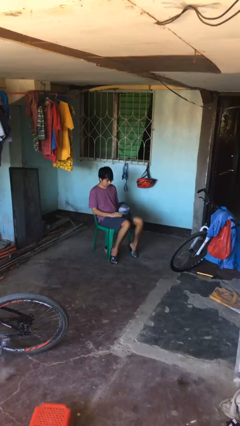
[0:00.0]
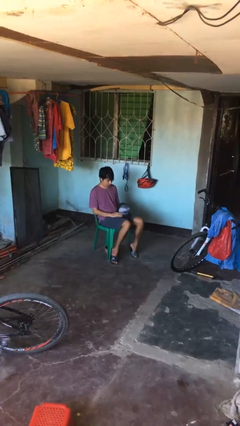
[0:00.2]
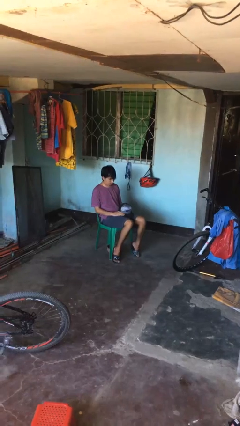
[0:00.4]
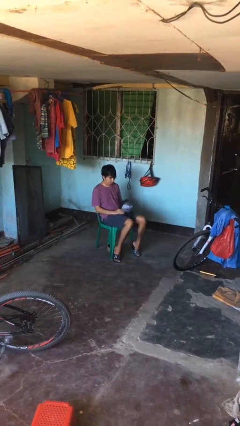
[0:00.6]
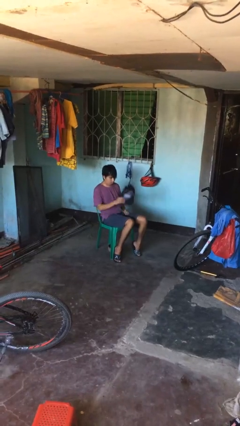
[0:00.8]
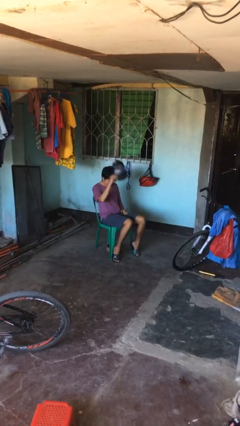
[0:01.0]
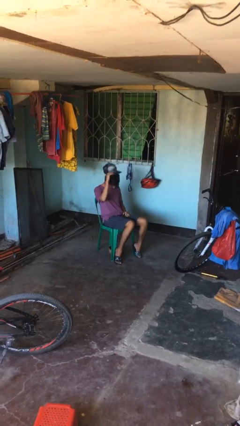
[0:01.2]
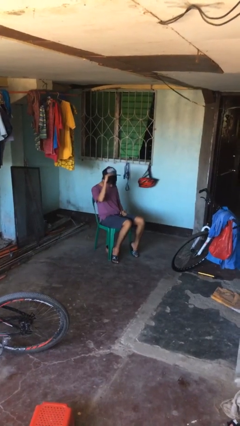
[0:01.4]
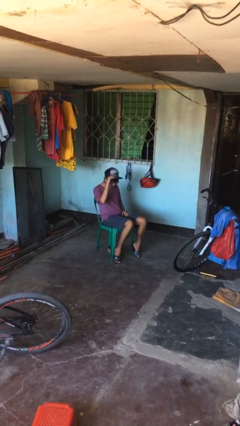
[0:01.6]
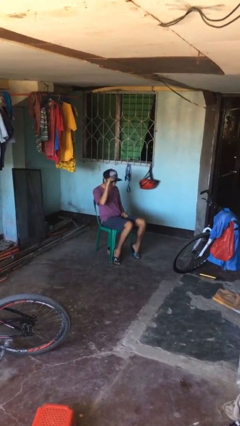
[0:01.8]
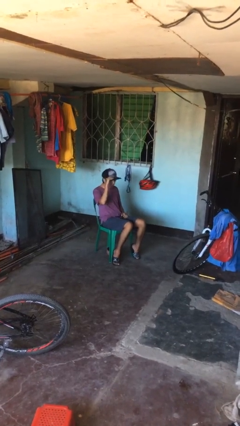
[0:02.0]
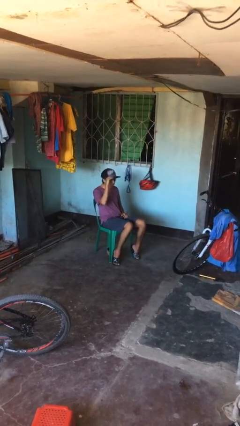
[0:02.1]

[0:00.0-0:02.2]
person puts on hat

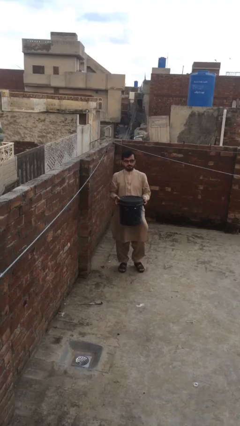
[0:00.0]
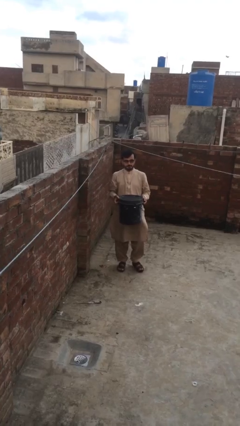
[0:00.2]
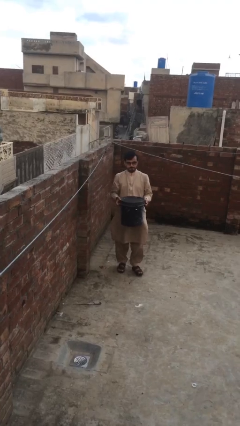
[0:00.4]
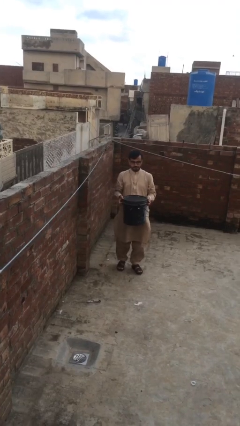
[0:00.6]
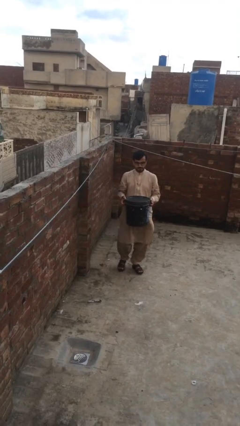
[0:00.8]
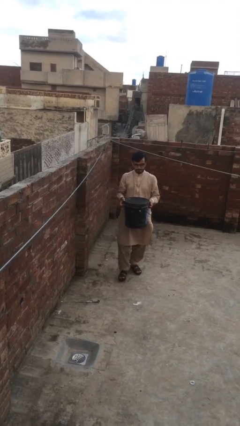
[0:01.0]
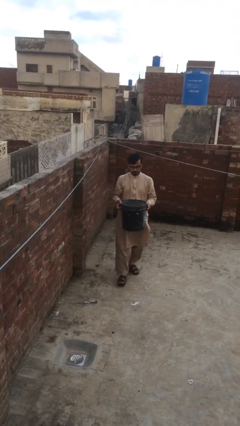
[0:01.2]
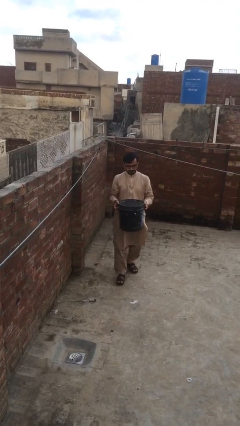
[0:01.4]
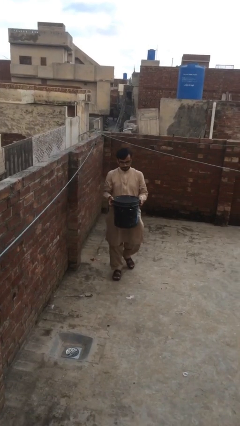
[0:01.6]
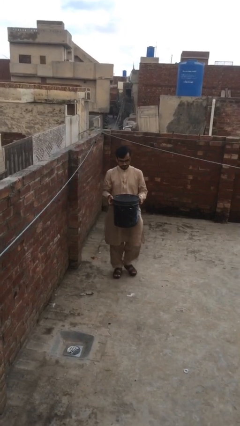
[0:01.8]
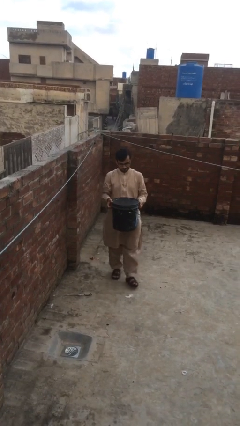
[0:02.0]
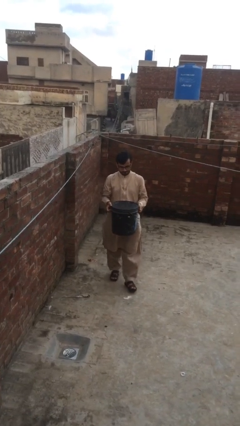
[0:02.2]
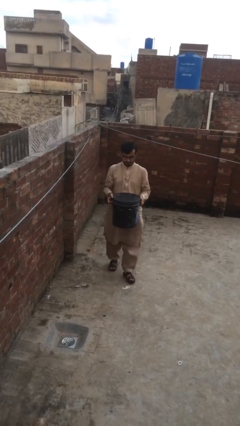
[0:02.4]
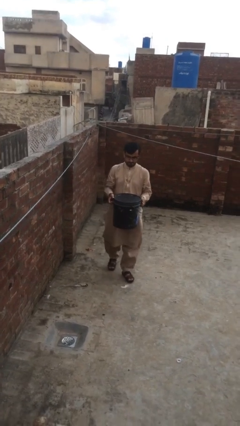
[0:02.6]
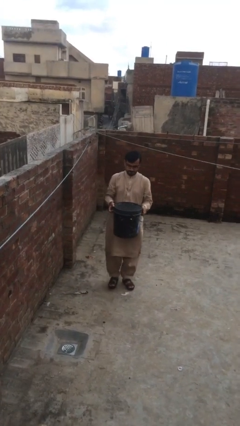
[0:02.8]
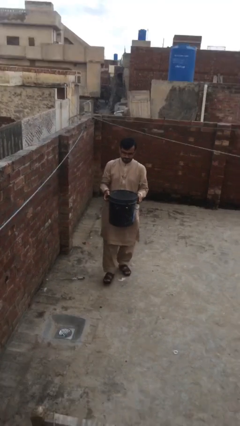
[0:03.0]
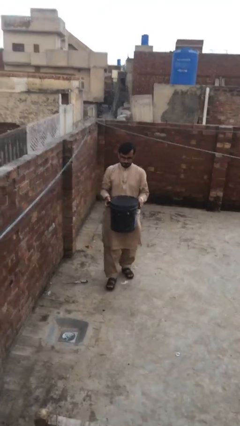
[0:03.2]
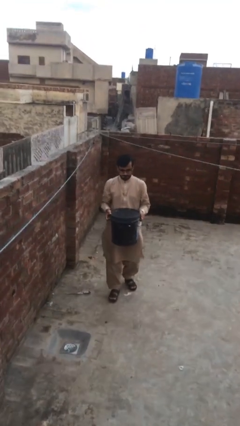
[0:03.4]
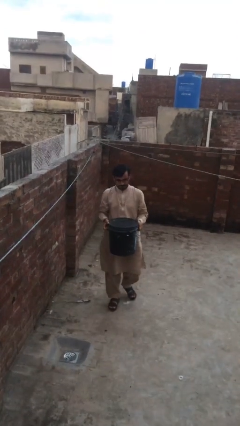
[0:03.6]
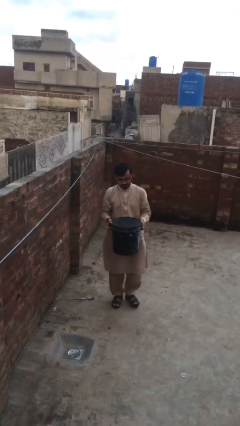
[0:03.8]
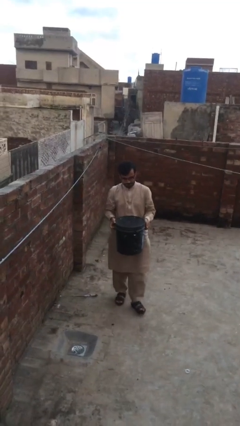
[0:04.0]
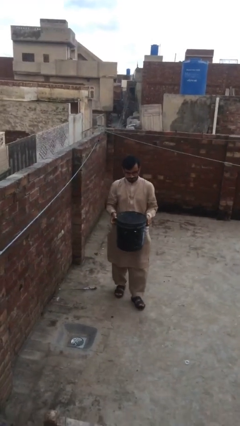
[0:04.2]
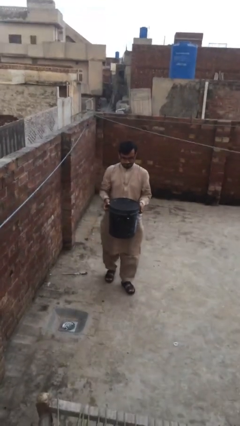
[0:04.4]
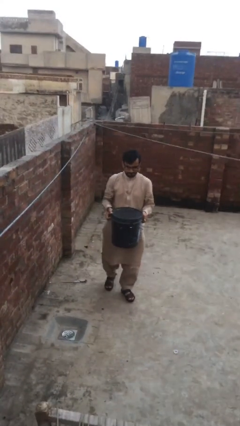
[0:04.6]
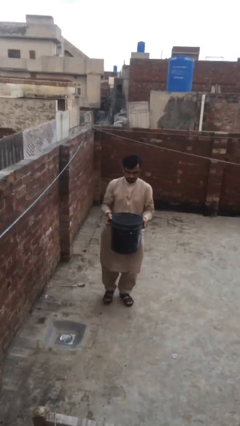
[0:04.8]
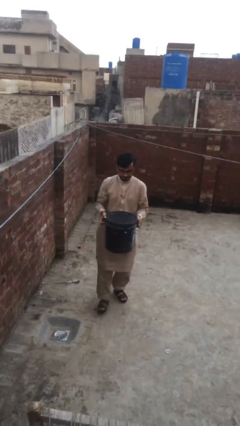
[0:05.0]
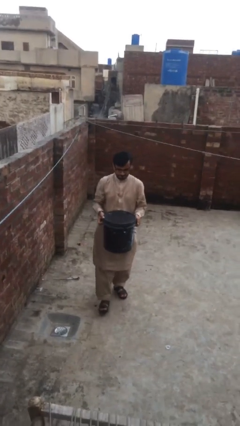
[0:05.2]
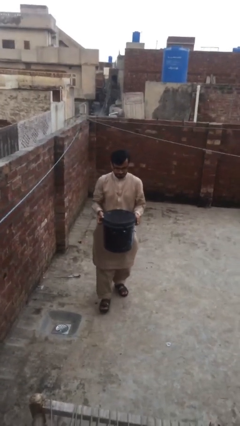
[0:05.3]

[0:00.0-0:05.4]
person carries heavy object

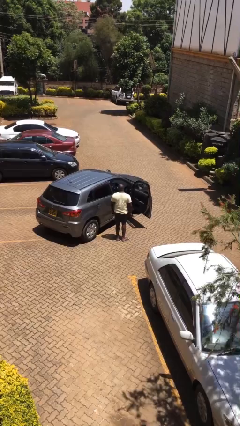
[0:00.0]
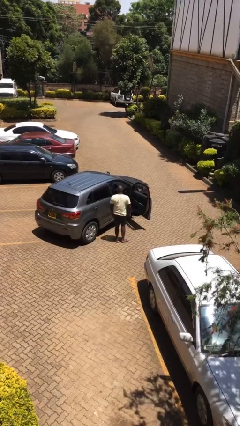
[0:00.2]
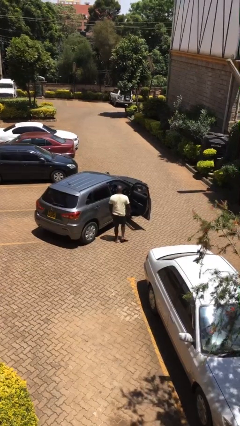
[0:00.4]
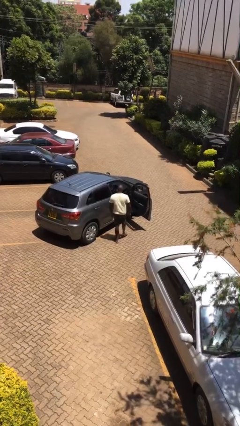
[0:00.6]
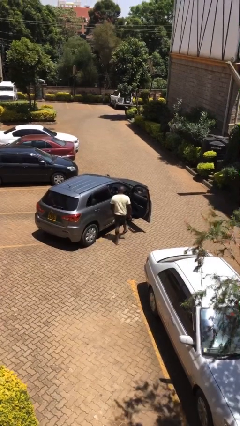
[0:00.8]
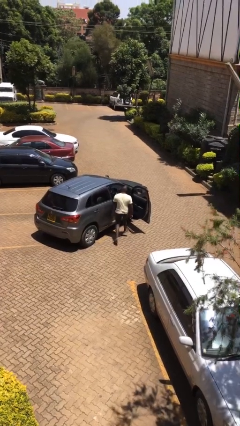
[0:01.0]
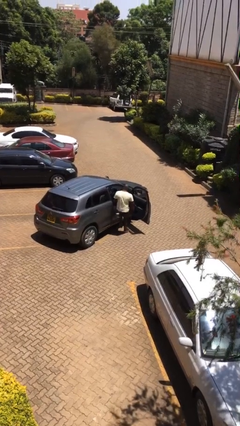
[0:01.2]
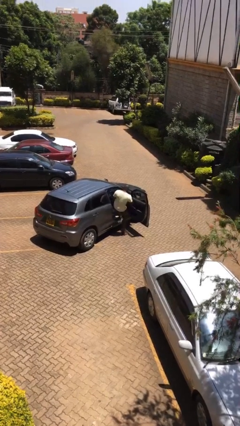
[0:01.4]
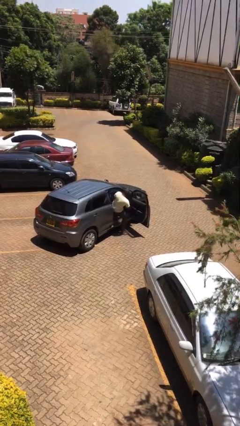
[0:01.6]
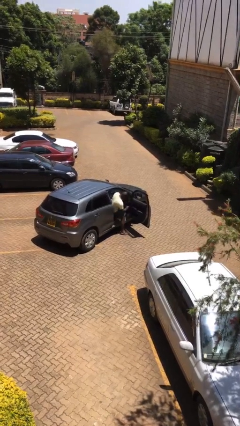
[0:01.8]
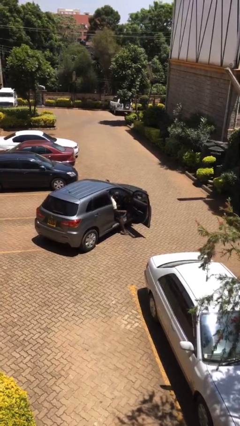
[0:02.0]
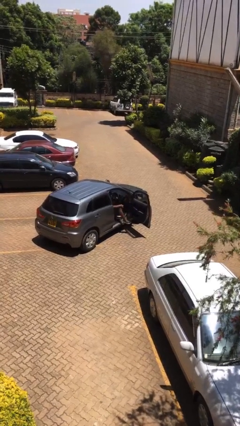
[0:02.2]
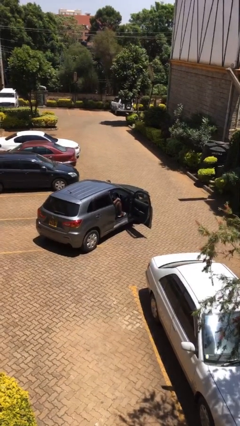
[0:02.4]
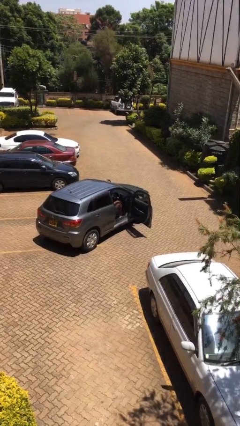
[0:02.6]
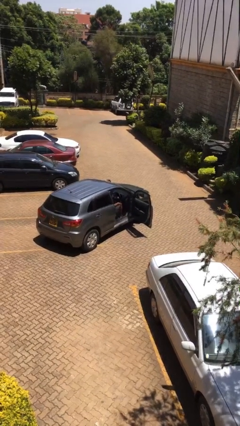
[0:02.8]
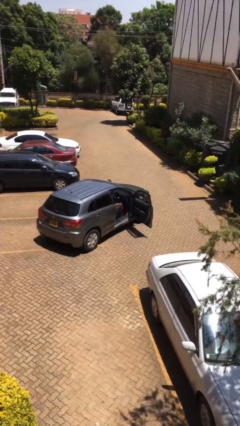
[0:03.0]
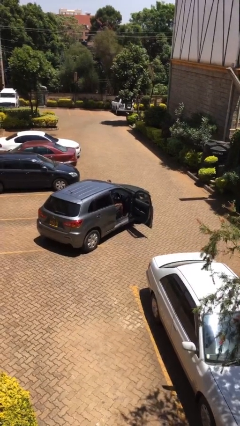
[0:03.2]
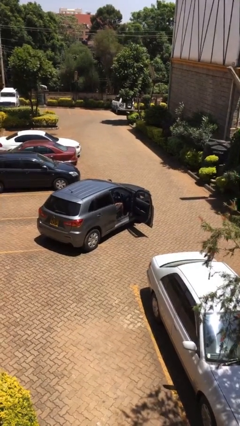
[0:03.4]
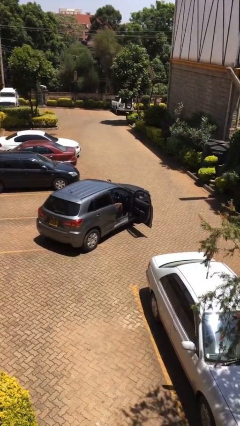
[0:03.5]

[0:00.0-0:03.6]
person enters car

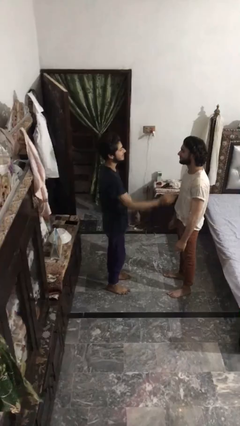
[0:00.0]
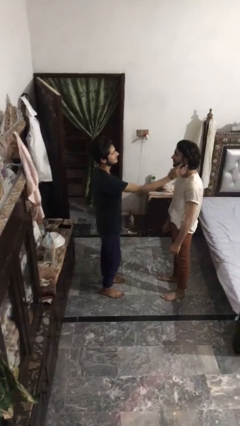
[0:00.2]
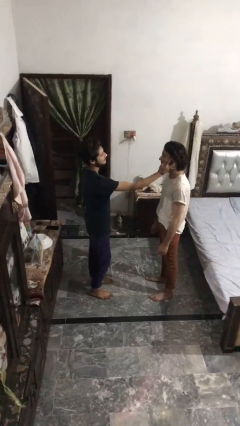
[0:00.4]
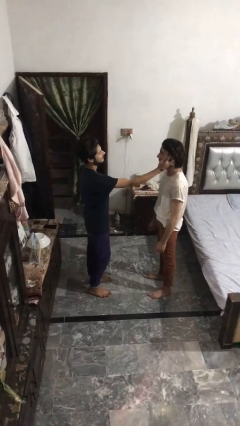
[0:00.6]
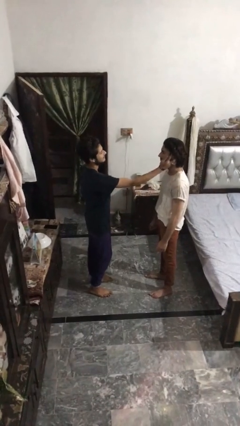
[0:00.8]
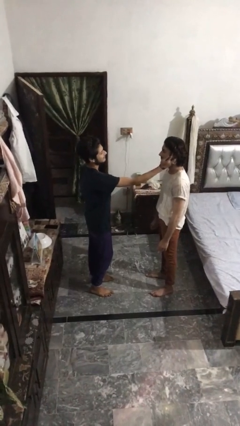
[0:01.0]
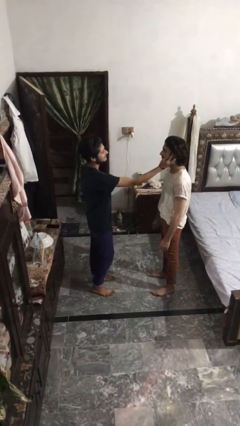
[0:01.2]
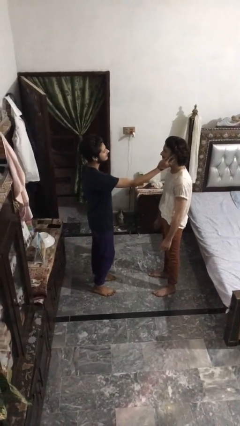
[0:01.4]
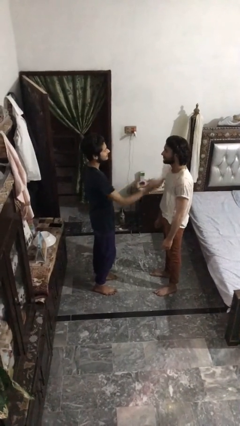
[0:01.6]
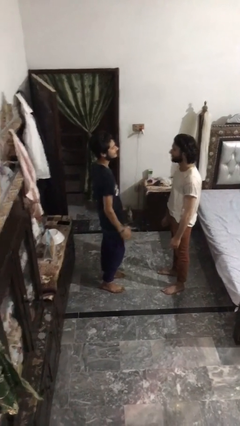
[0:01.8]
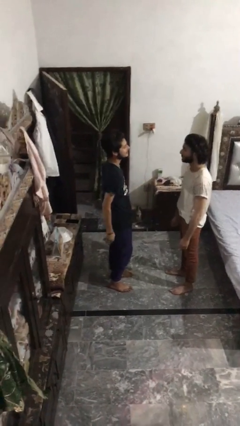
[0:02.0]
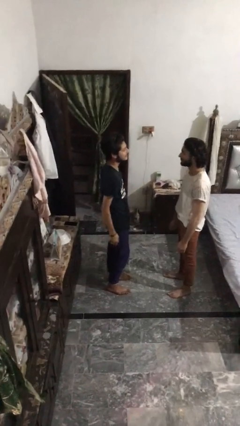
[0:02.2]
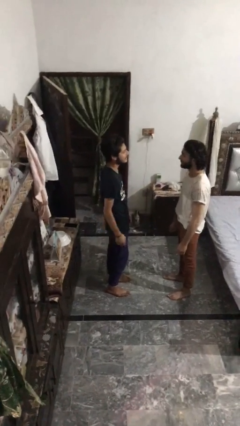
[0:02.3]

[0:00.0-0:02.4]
person touches face of person

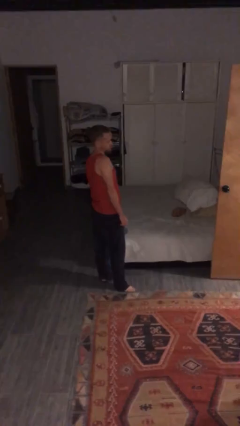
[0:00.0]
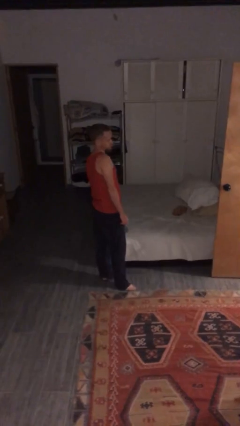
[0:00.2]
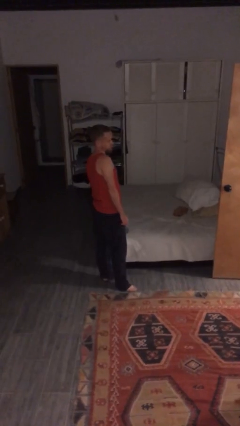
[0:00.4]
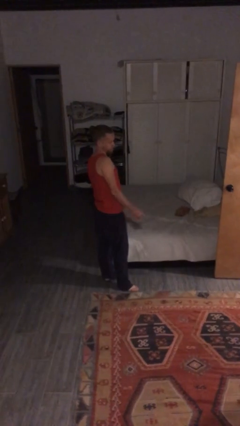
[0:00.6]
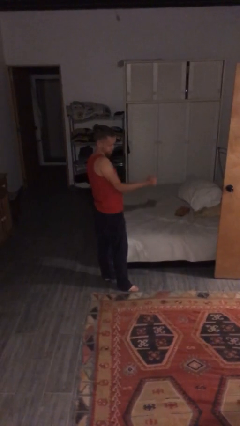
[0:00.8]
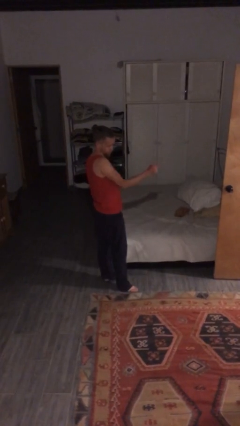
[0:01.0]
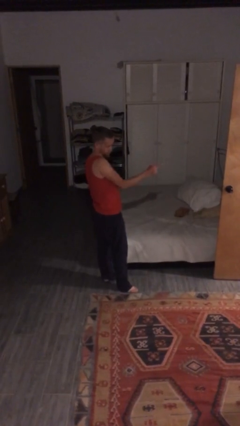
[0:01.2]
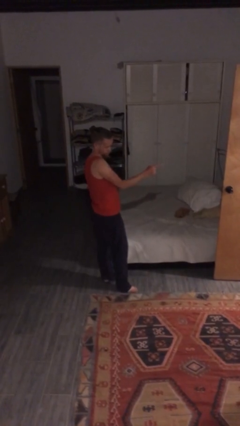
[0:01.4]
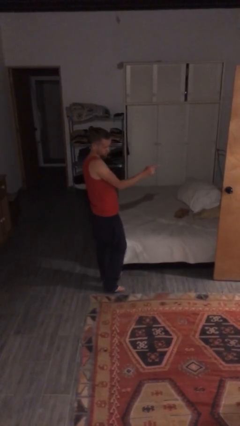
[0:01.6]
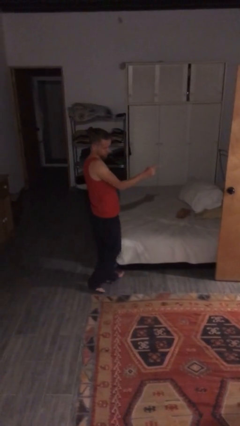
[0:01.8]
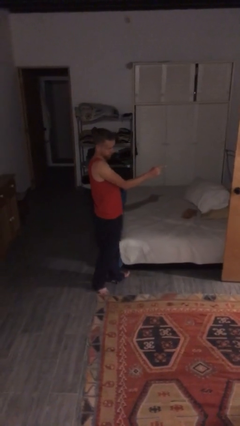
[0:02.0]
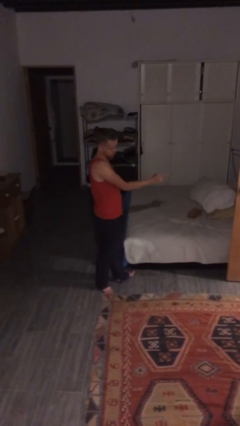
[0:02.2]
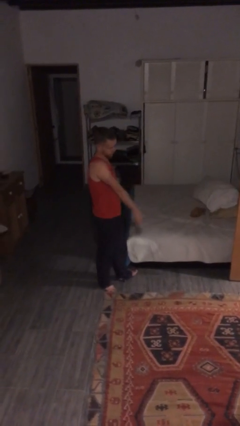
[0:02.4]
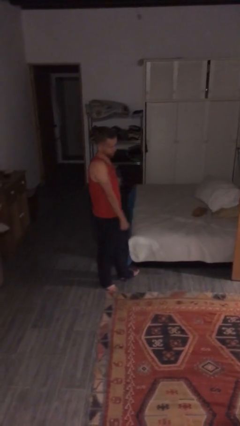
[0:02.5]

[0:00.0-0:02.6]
person points at person

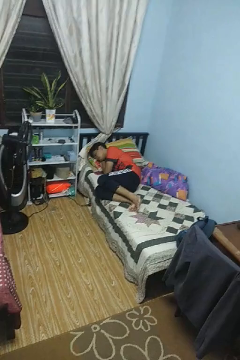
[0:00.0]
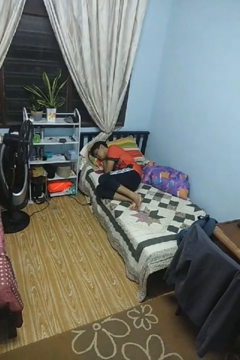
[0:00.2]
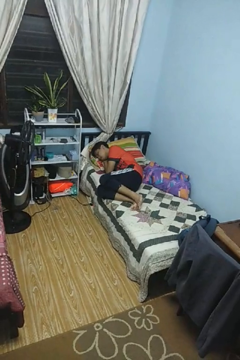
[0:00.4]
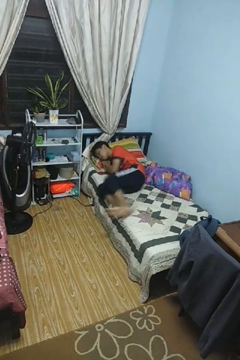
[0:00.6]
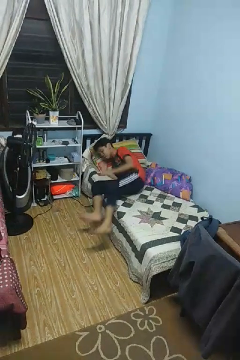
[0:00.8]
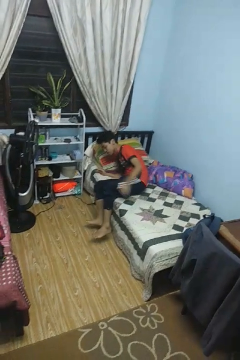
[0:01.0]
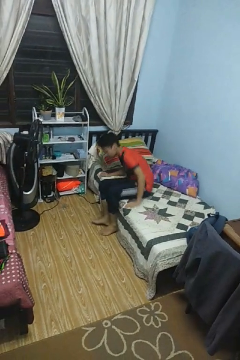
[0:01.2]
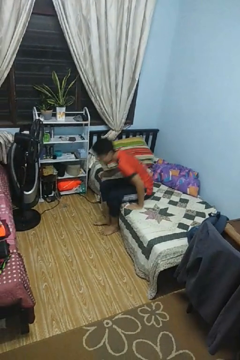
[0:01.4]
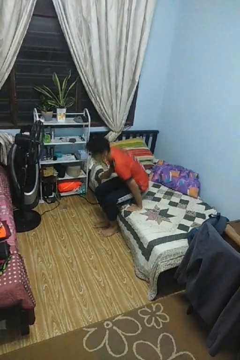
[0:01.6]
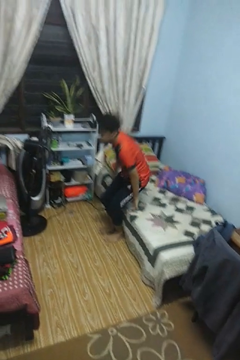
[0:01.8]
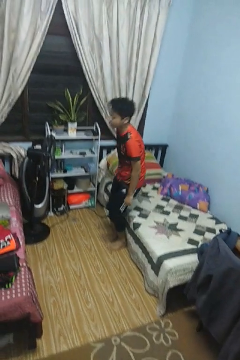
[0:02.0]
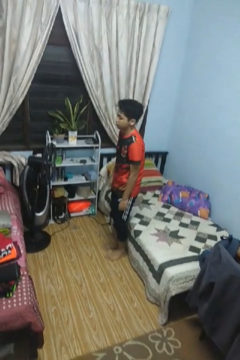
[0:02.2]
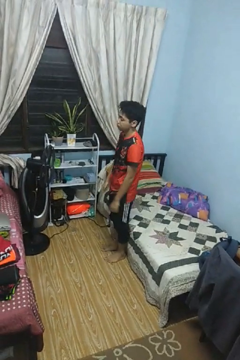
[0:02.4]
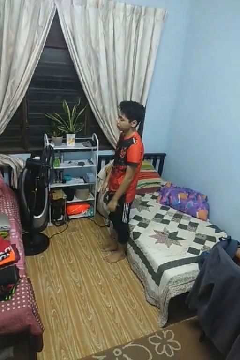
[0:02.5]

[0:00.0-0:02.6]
person stands up
